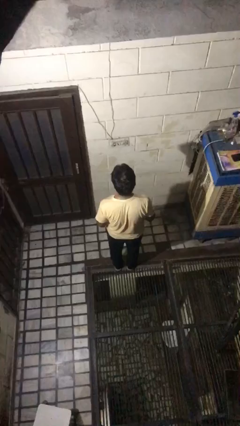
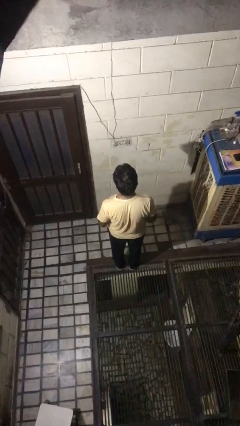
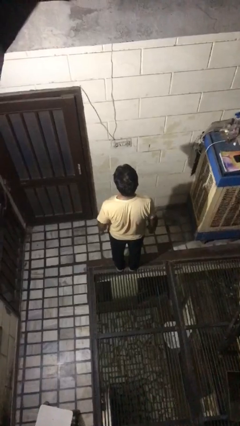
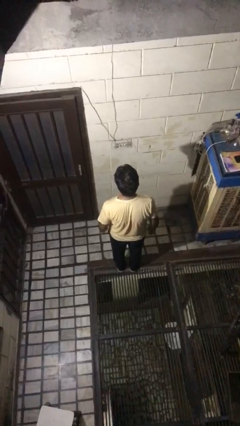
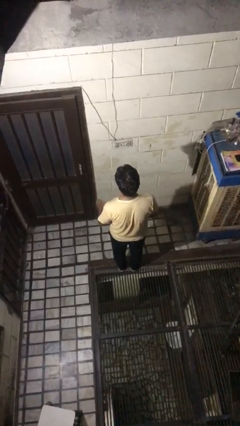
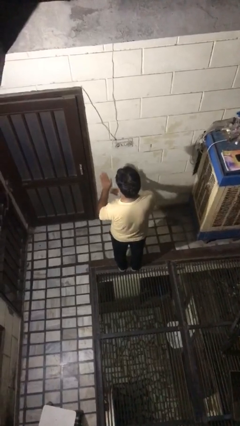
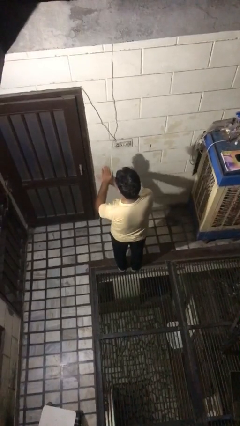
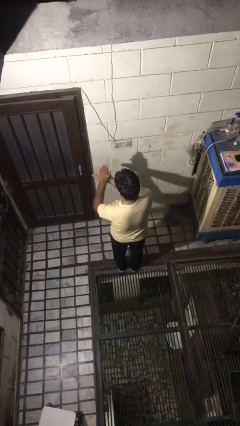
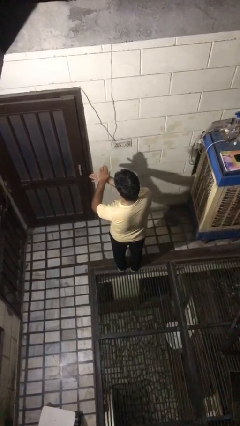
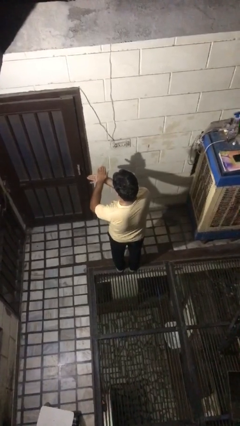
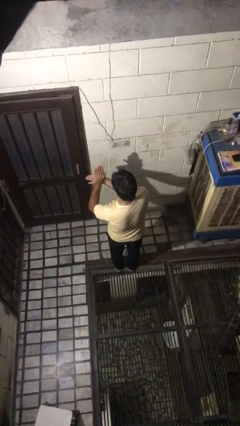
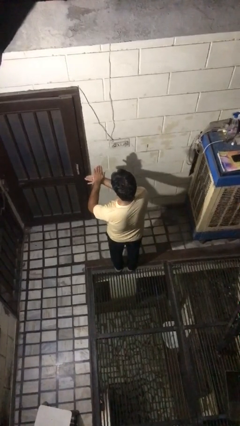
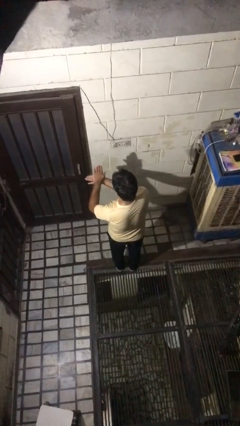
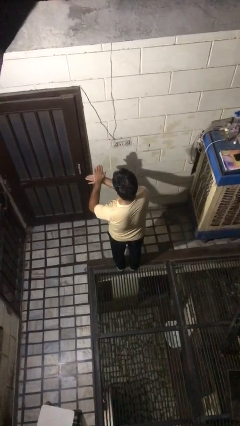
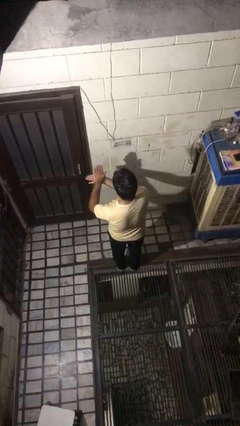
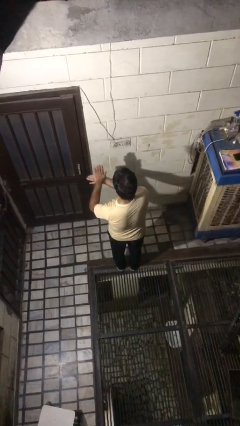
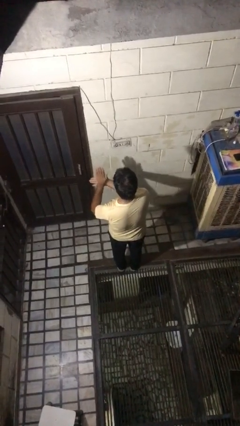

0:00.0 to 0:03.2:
person gestures number five

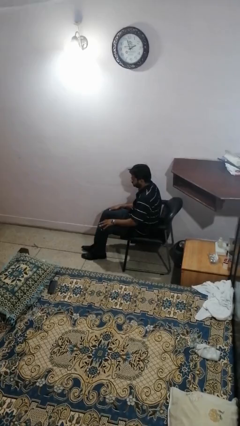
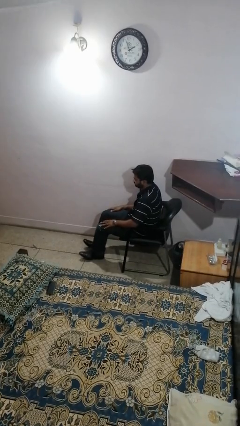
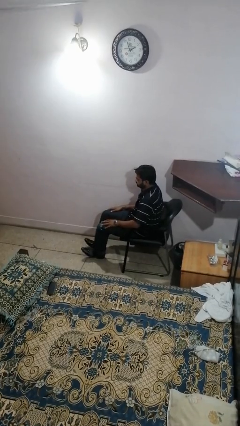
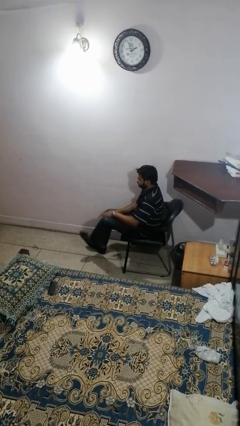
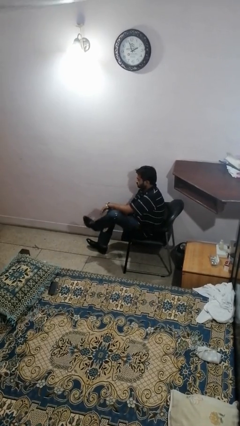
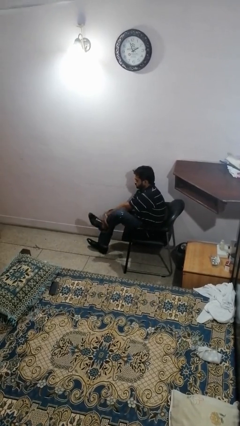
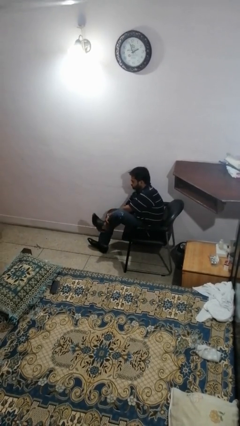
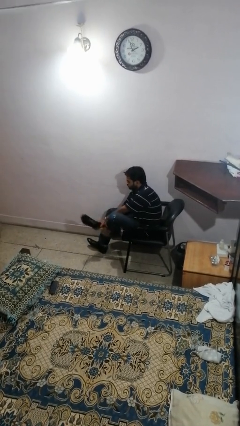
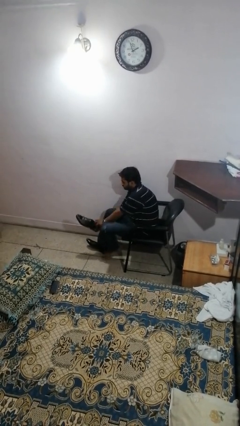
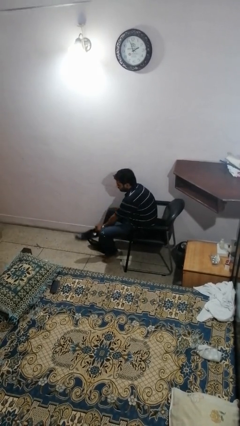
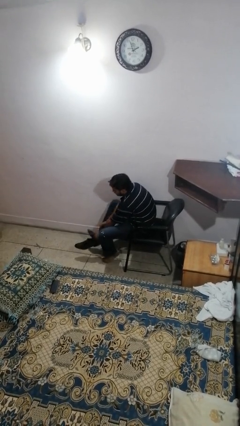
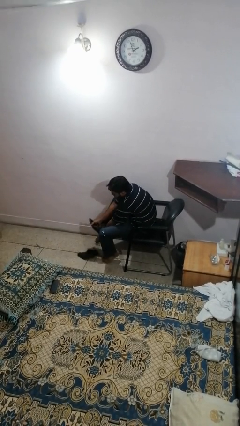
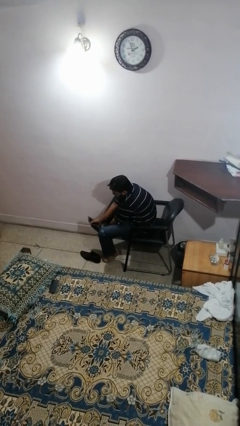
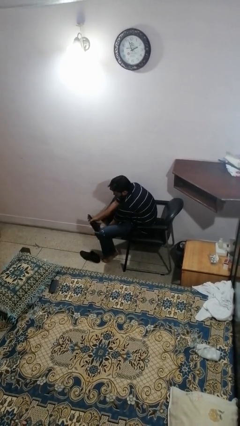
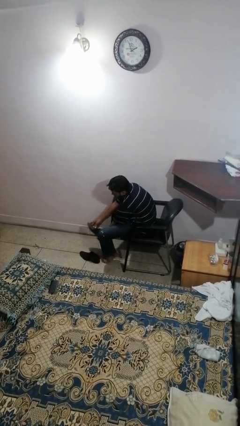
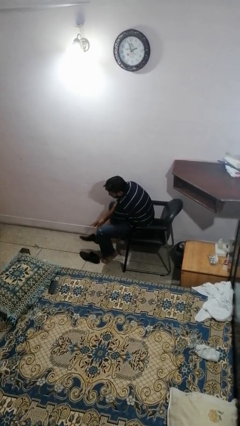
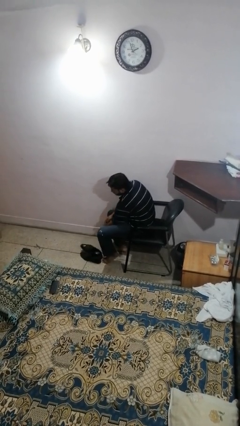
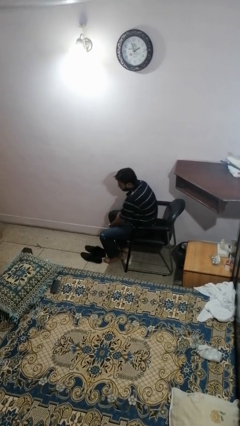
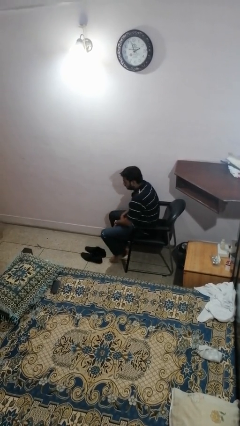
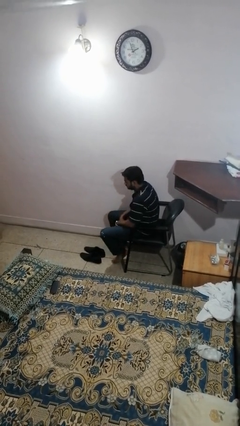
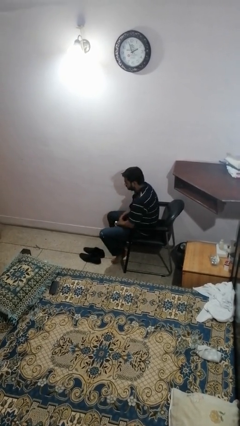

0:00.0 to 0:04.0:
person takes off boots

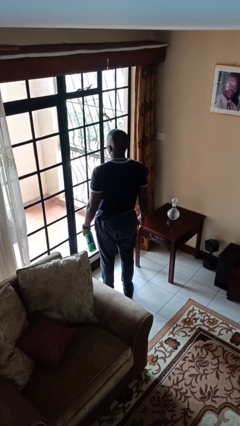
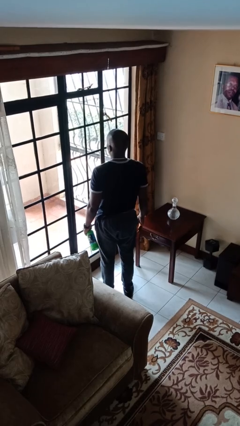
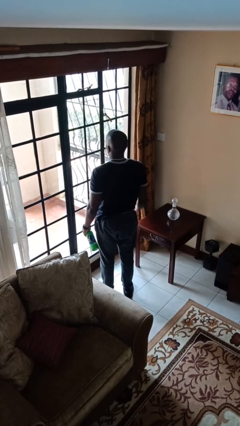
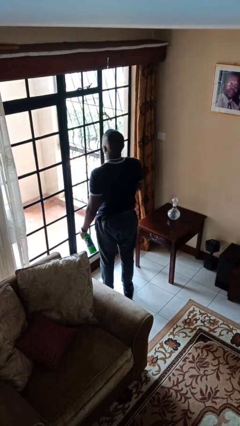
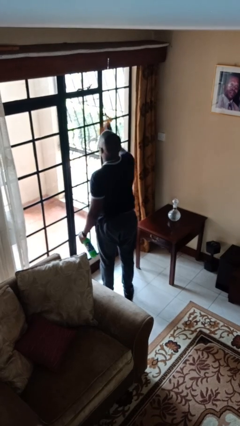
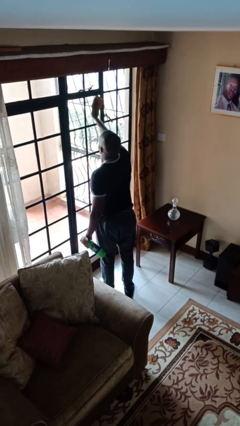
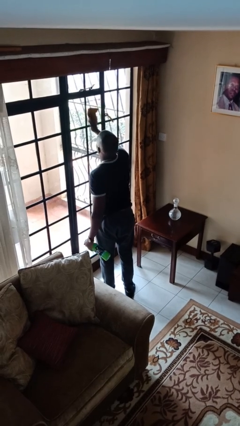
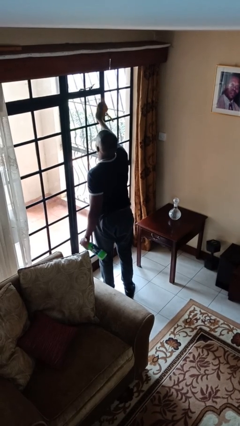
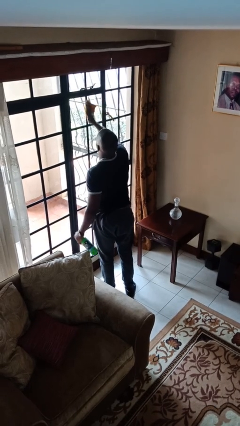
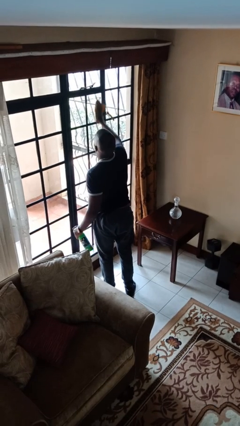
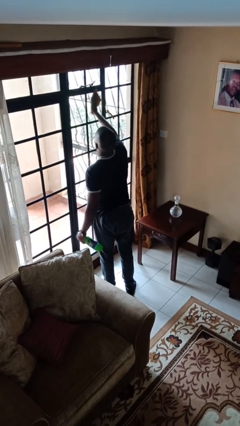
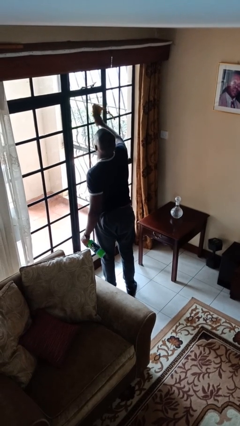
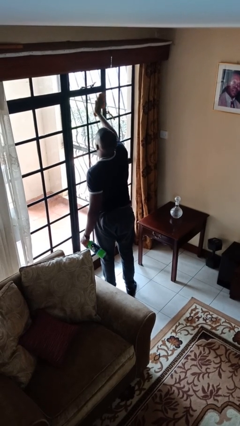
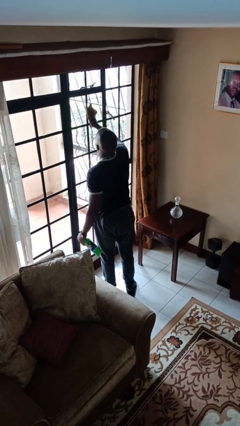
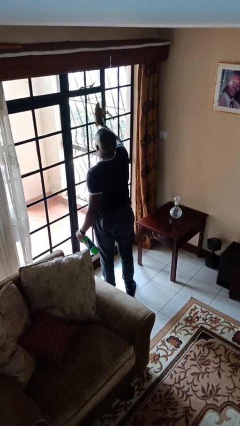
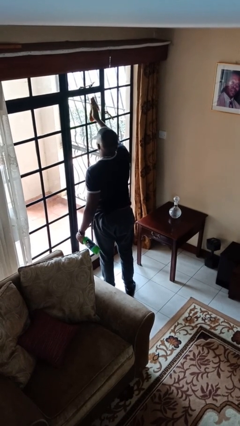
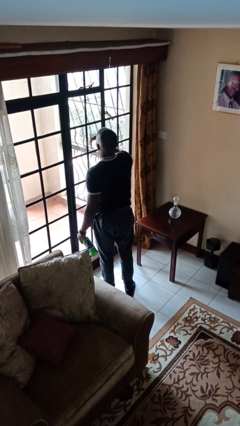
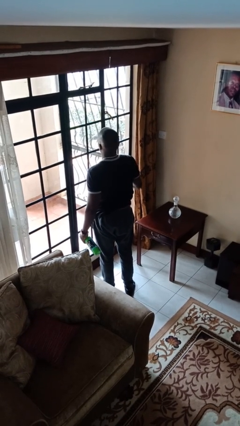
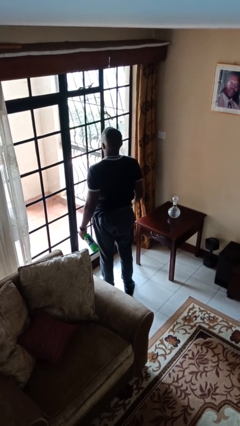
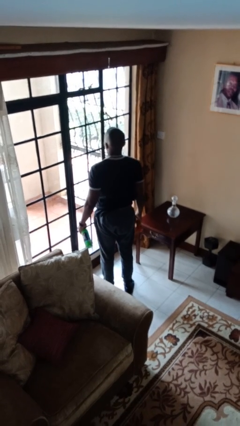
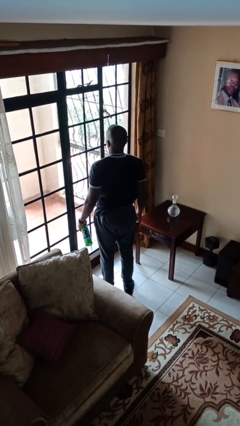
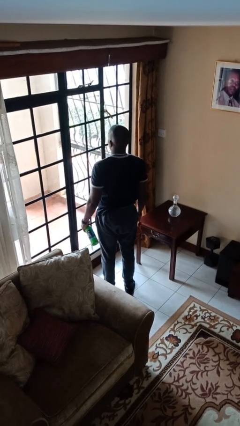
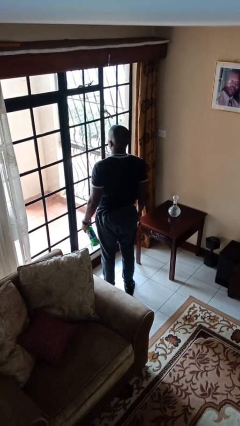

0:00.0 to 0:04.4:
person washes window

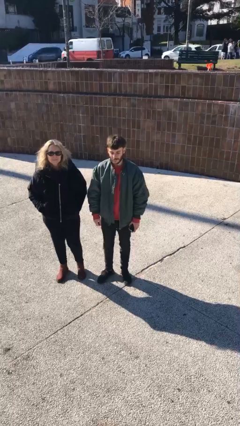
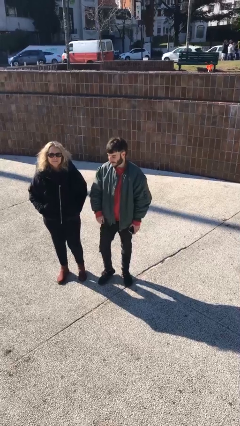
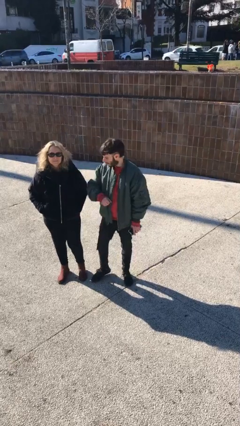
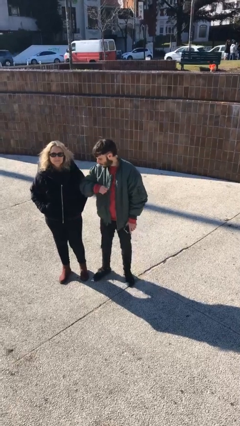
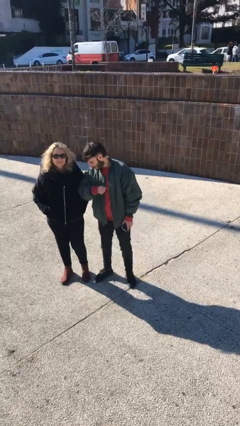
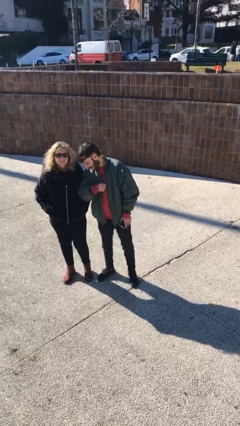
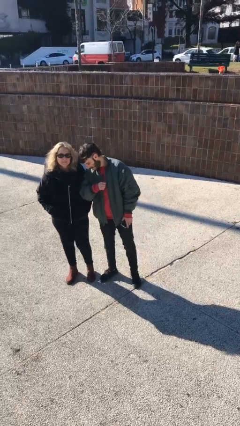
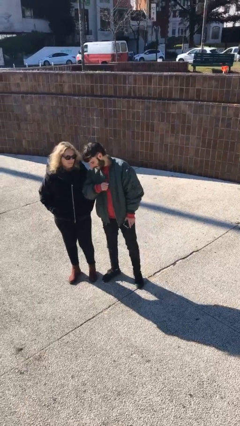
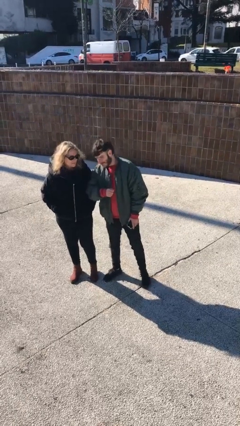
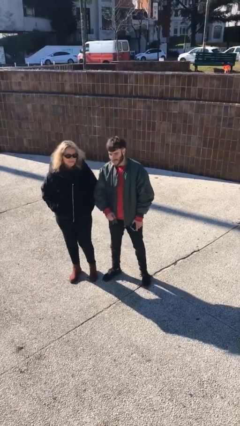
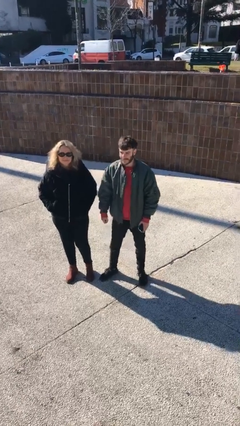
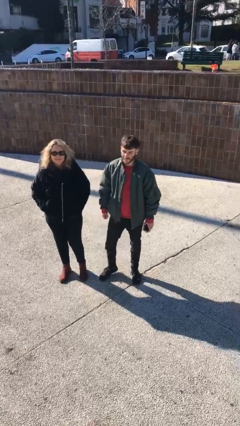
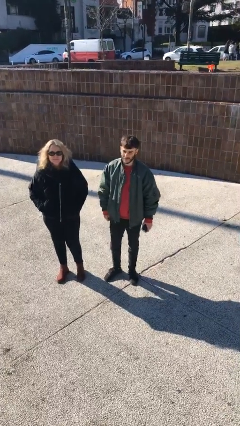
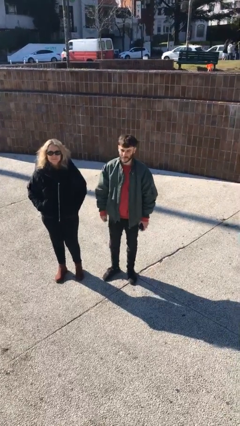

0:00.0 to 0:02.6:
person nudges person with elbow

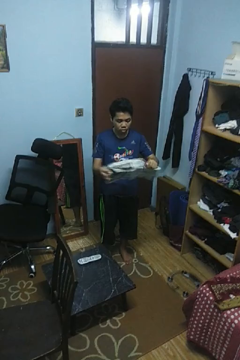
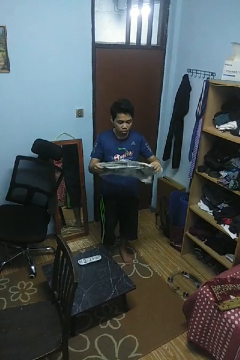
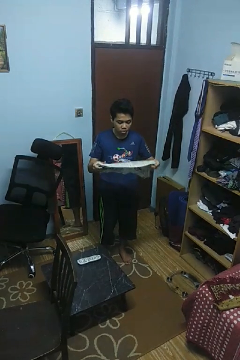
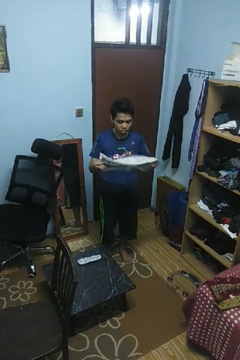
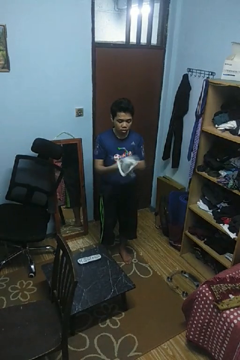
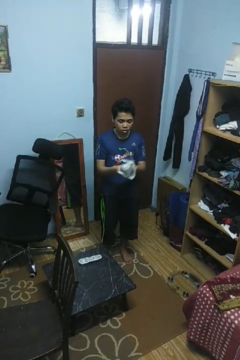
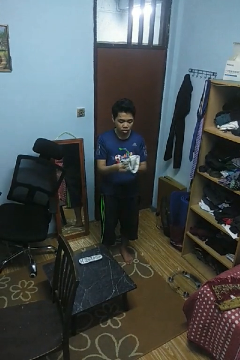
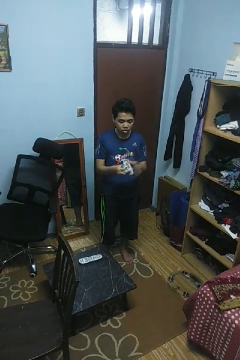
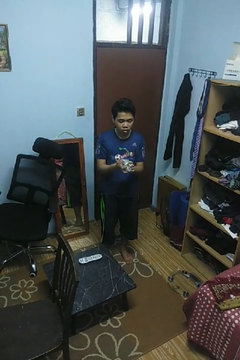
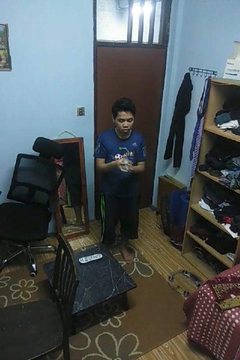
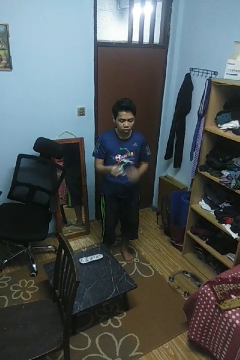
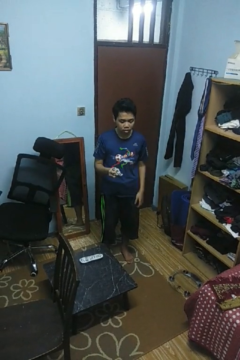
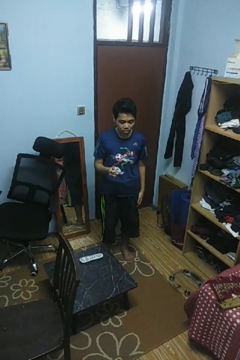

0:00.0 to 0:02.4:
person crumples paper

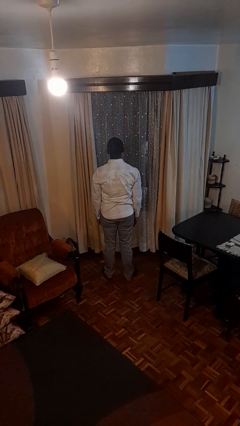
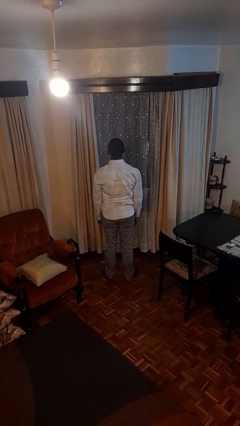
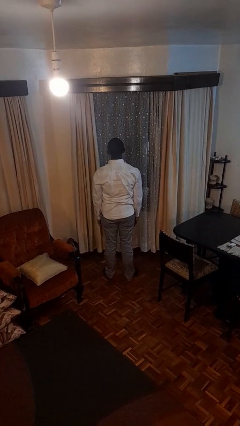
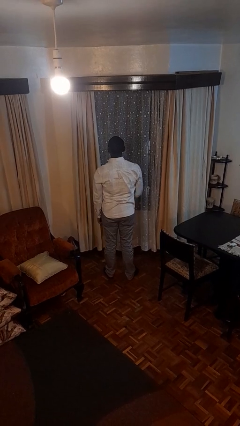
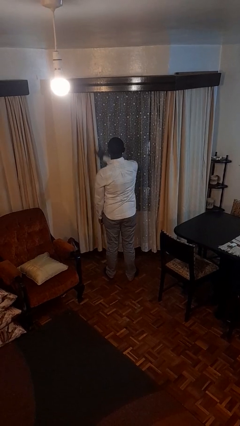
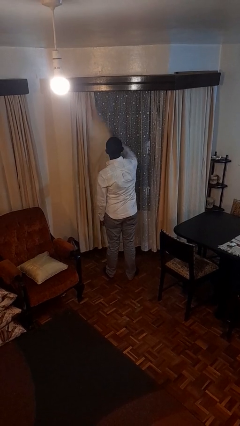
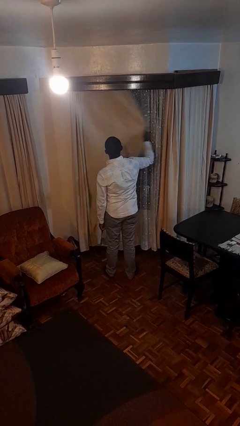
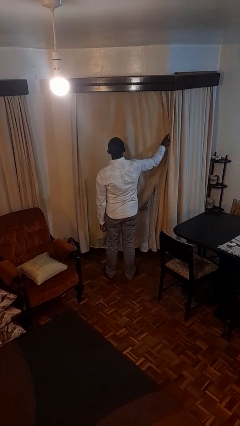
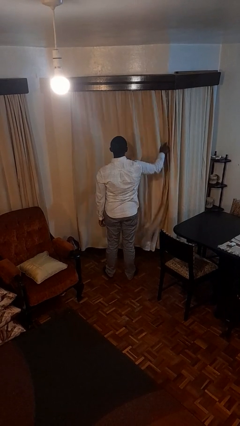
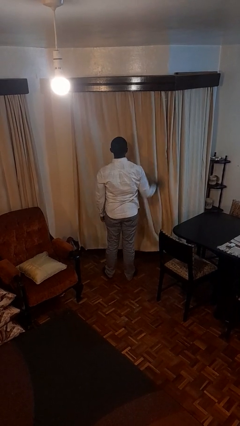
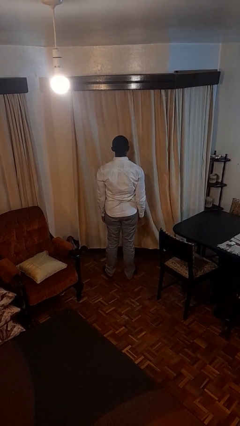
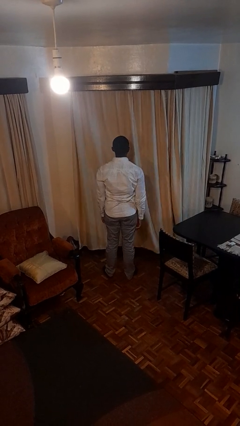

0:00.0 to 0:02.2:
person closes curtains
